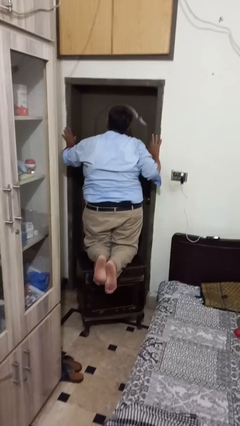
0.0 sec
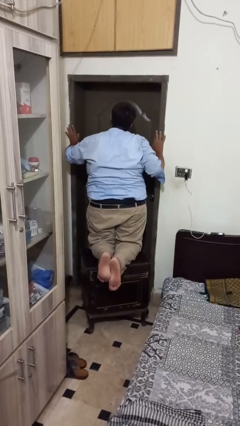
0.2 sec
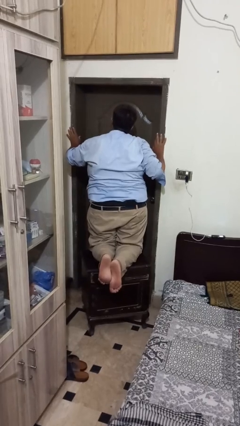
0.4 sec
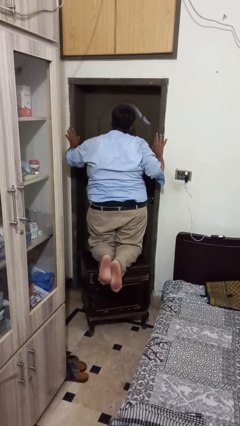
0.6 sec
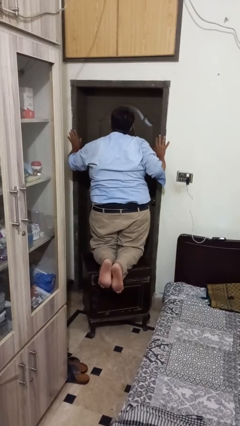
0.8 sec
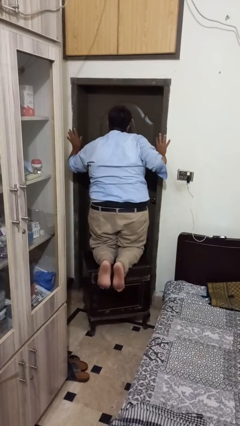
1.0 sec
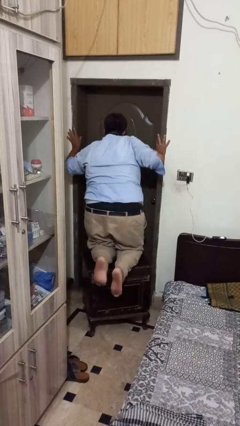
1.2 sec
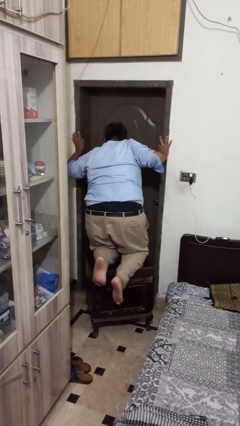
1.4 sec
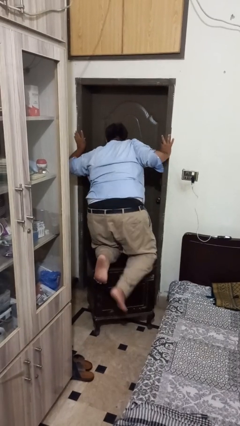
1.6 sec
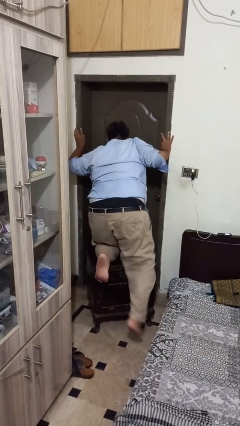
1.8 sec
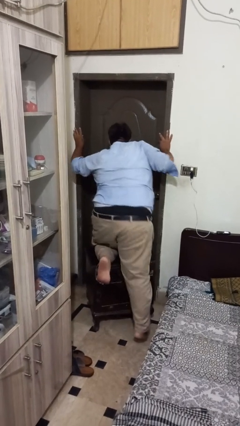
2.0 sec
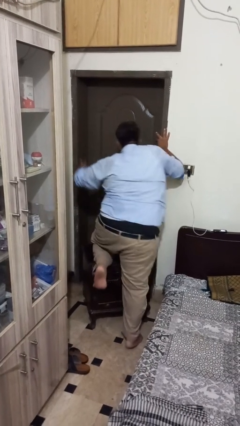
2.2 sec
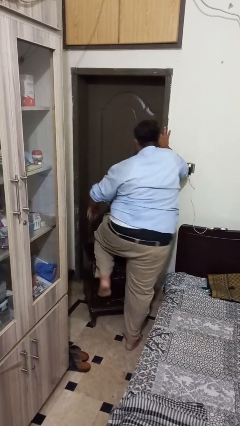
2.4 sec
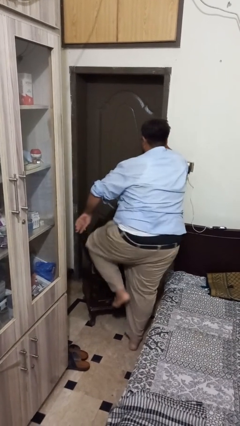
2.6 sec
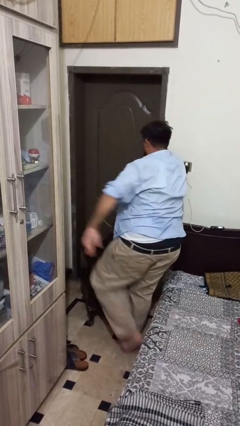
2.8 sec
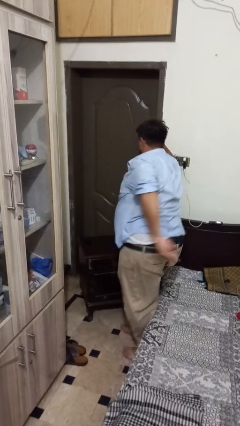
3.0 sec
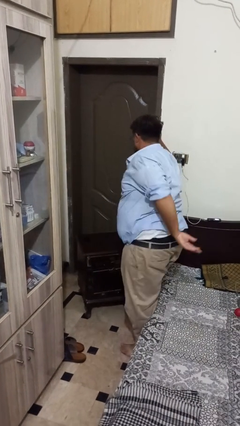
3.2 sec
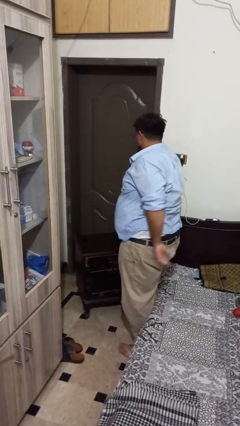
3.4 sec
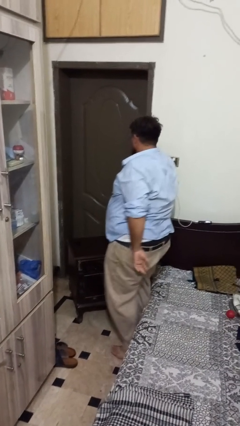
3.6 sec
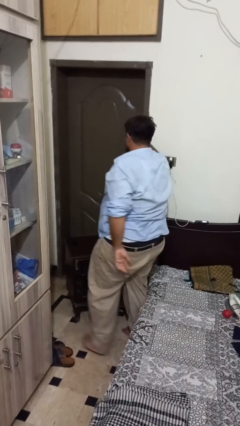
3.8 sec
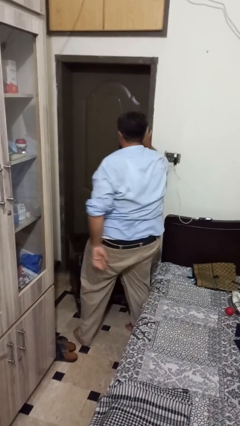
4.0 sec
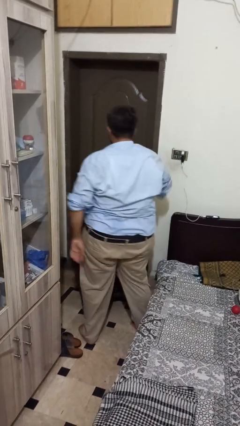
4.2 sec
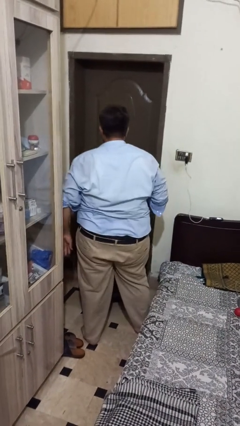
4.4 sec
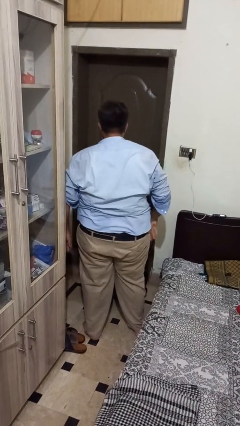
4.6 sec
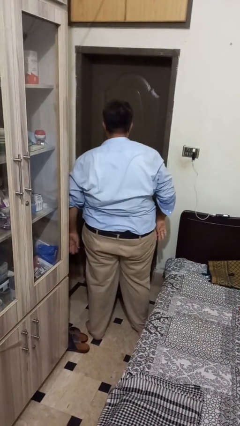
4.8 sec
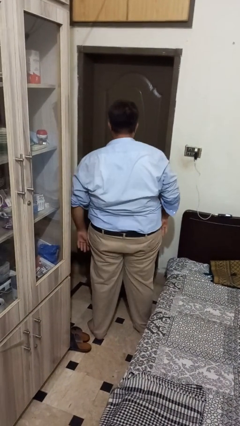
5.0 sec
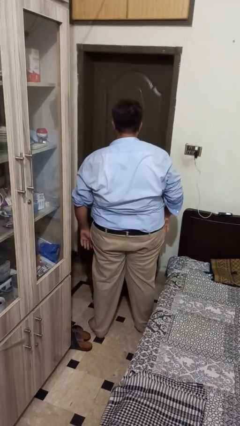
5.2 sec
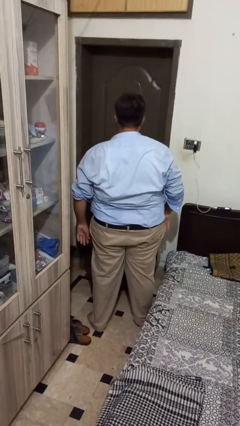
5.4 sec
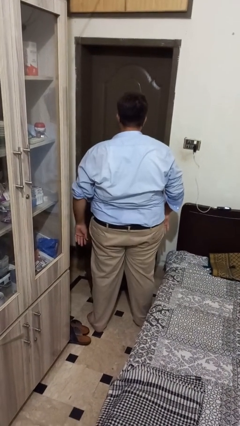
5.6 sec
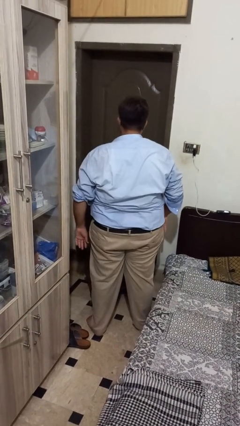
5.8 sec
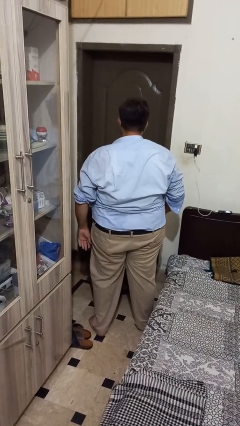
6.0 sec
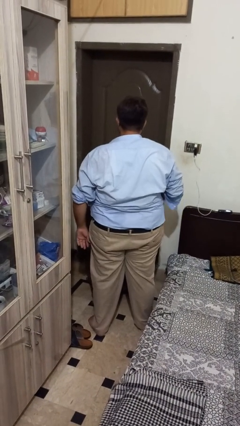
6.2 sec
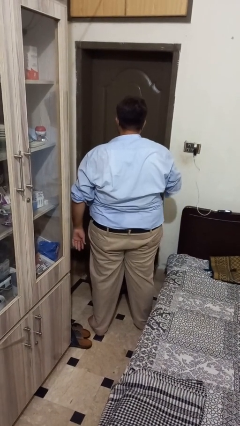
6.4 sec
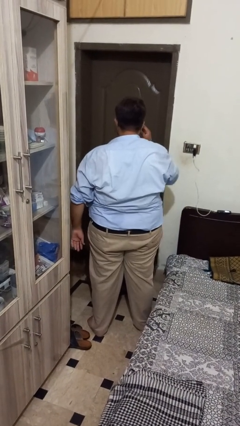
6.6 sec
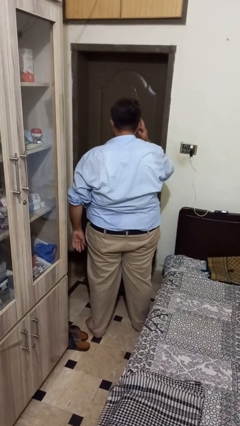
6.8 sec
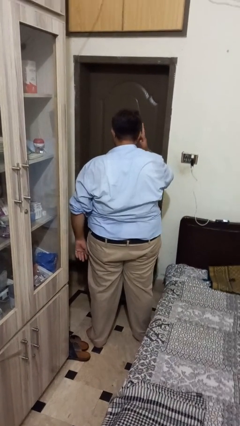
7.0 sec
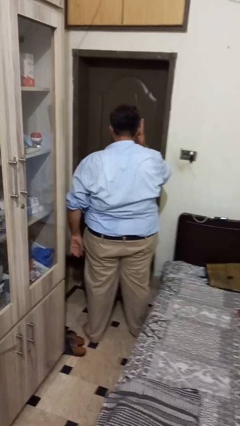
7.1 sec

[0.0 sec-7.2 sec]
person climbs off table

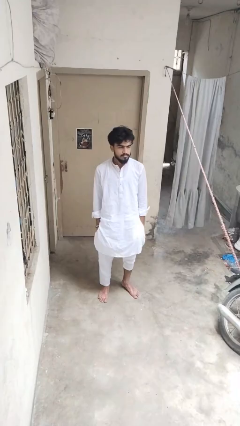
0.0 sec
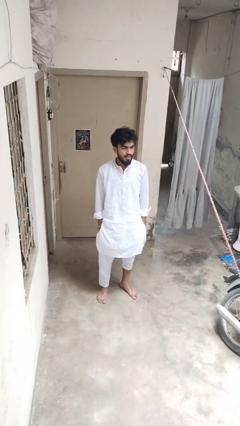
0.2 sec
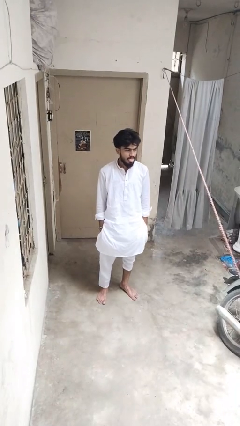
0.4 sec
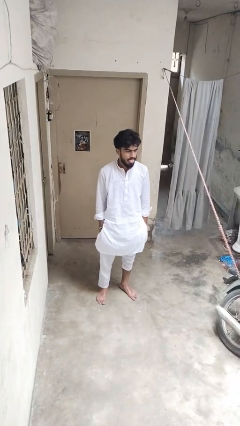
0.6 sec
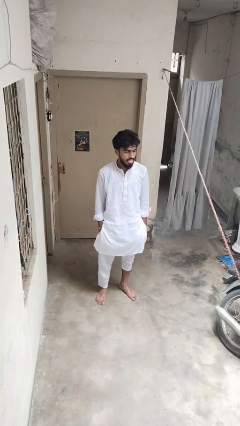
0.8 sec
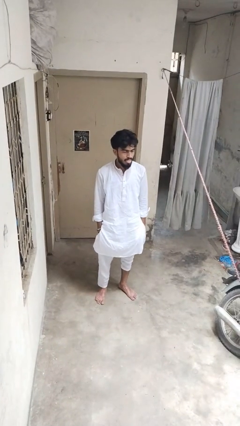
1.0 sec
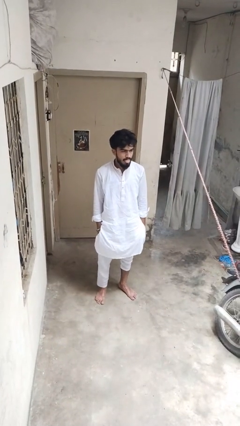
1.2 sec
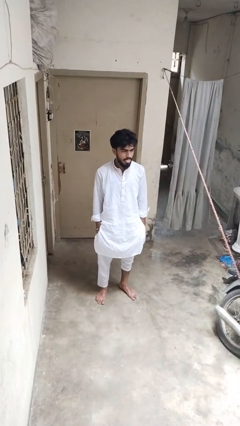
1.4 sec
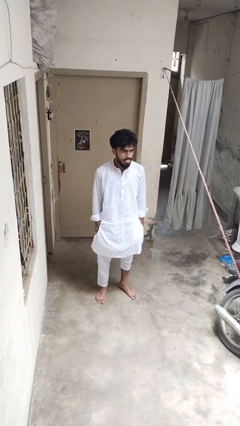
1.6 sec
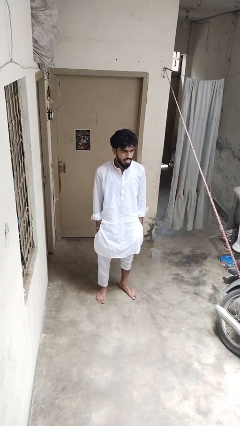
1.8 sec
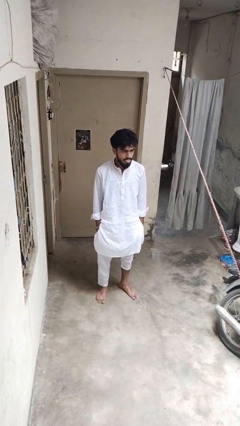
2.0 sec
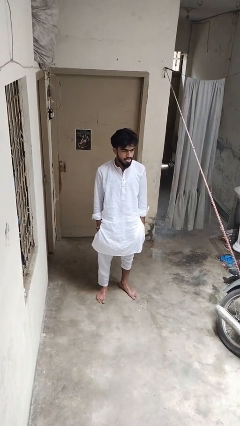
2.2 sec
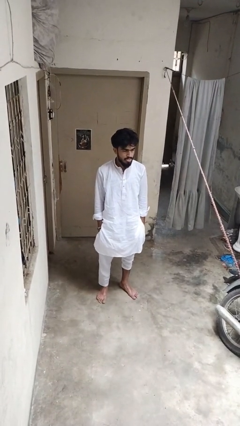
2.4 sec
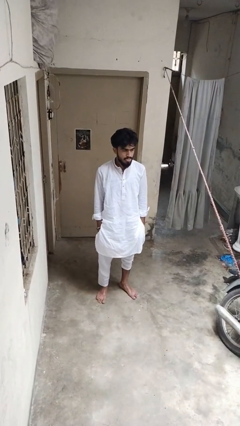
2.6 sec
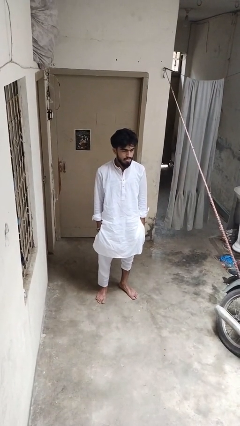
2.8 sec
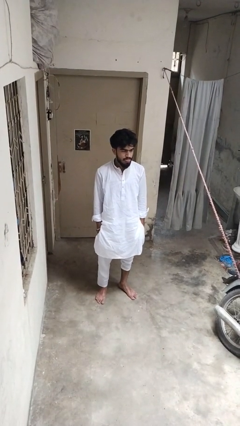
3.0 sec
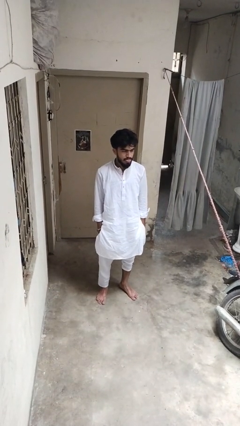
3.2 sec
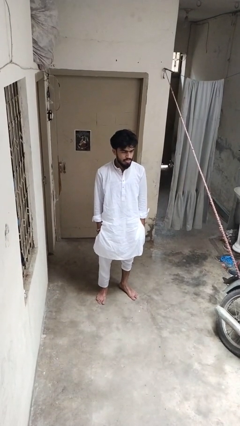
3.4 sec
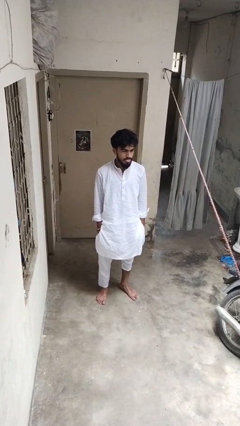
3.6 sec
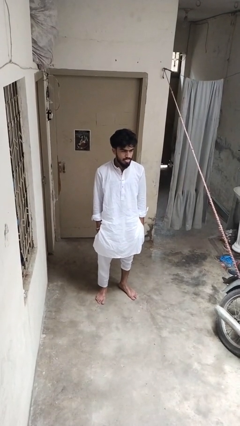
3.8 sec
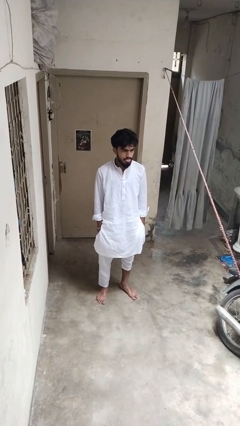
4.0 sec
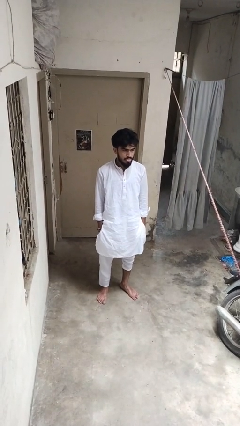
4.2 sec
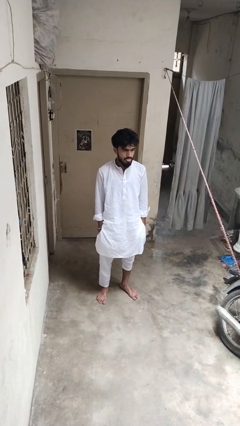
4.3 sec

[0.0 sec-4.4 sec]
person sticks out tongue

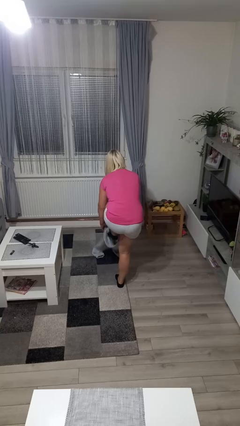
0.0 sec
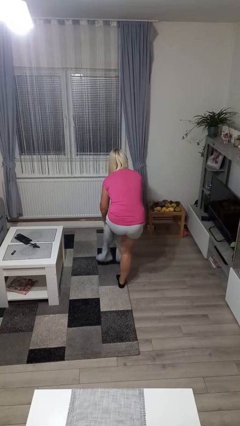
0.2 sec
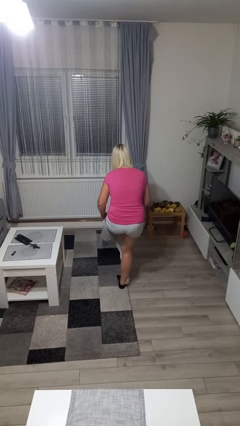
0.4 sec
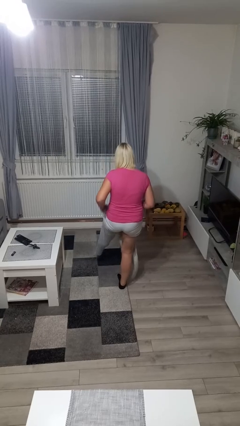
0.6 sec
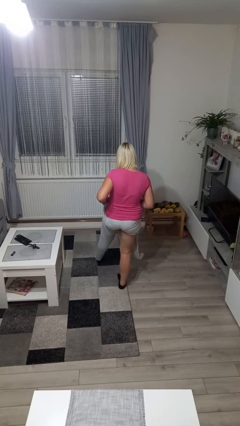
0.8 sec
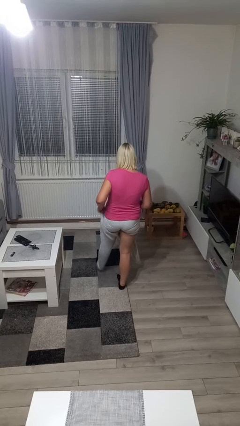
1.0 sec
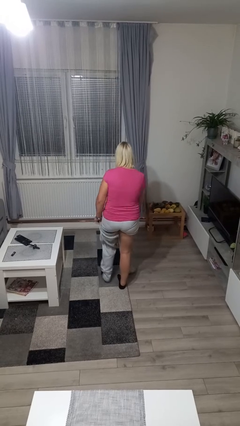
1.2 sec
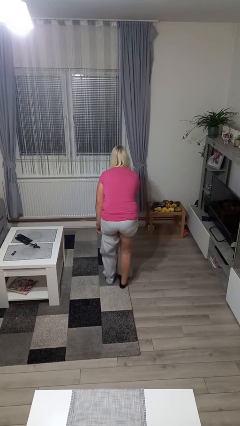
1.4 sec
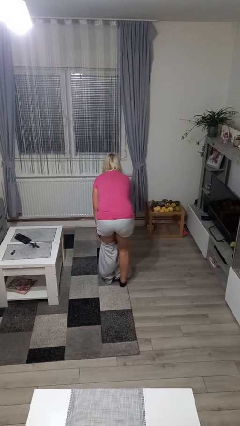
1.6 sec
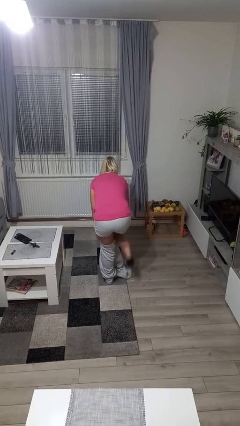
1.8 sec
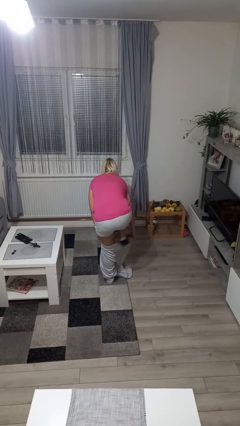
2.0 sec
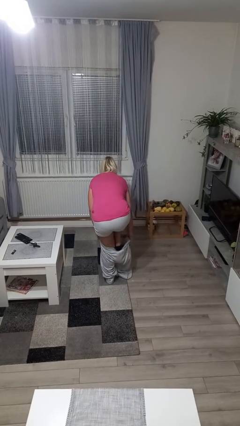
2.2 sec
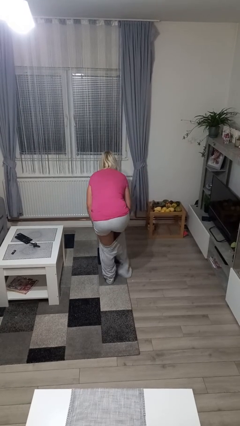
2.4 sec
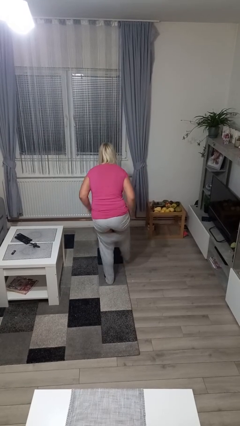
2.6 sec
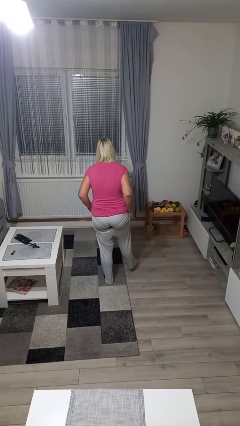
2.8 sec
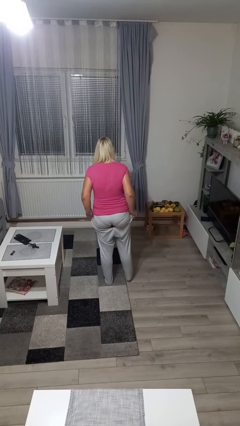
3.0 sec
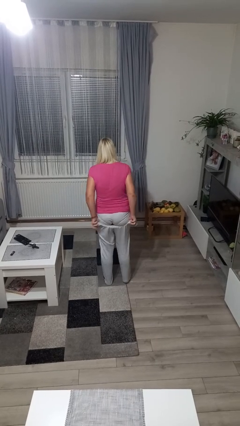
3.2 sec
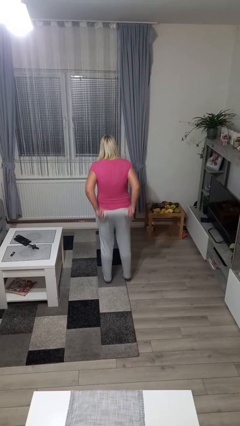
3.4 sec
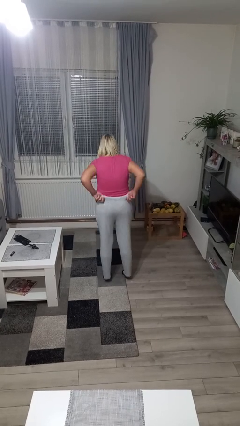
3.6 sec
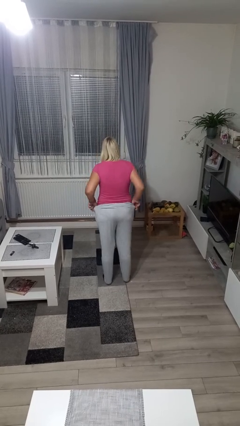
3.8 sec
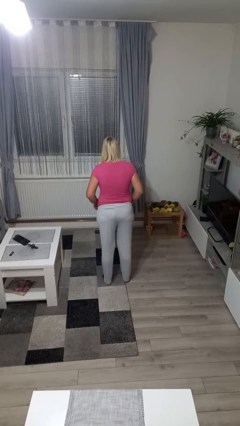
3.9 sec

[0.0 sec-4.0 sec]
person puts on pants

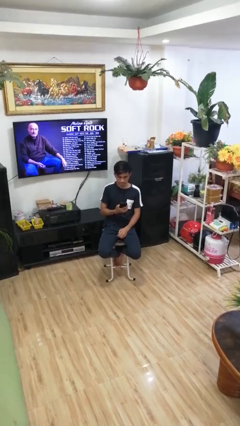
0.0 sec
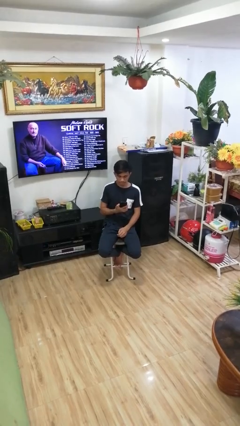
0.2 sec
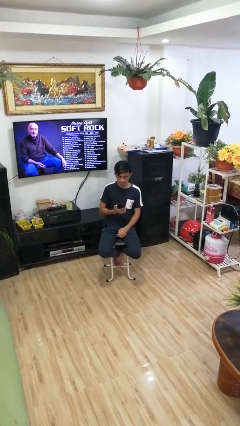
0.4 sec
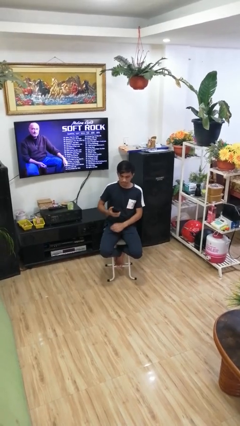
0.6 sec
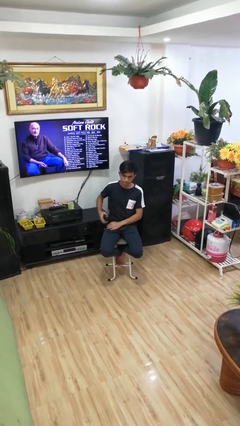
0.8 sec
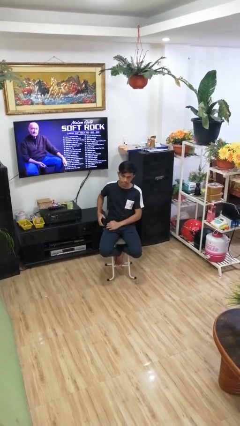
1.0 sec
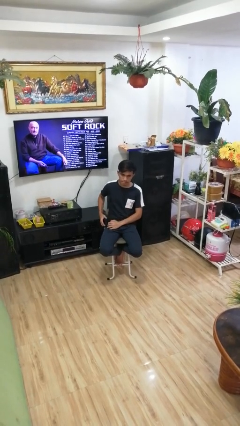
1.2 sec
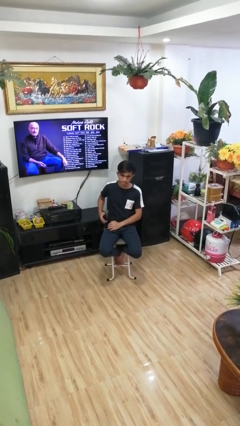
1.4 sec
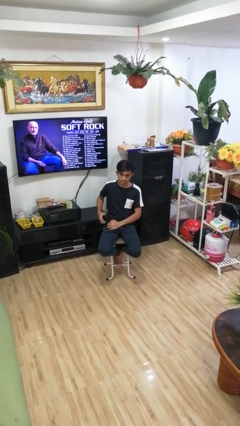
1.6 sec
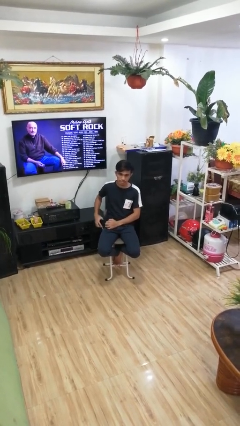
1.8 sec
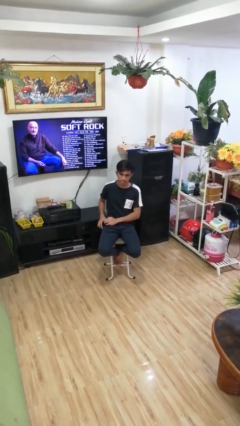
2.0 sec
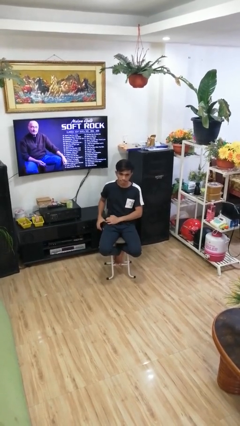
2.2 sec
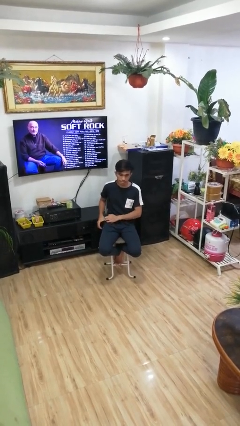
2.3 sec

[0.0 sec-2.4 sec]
person puts phone into pocket
